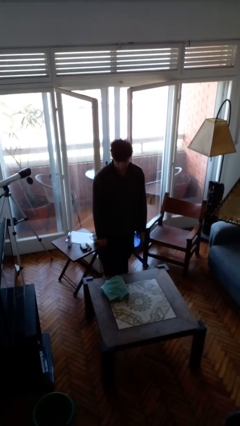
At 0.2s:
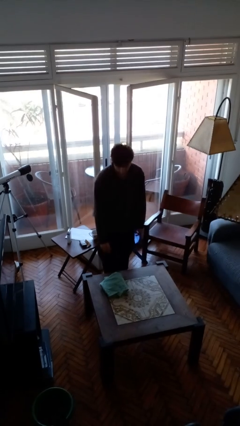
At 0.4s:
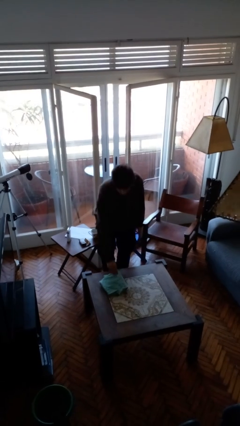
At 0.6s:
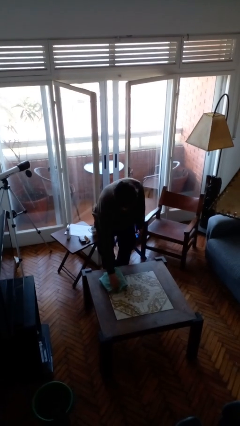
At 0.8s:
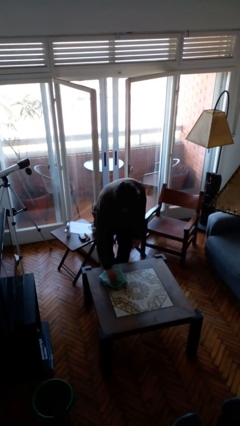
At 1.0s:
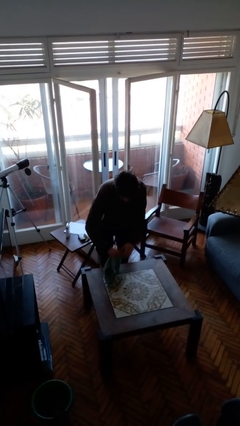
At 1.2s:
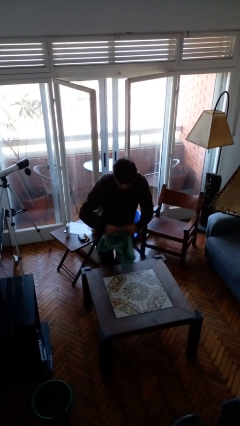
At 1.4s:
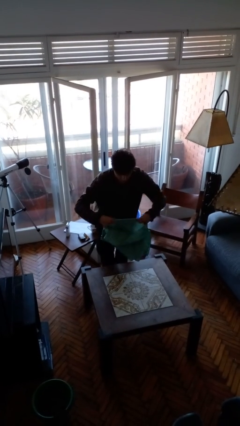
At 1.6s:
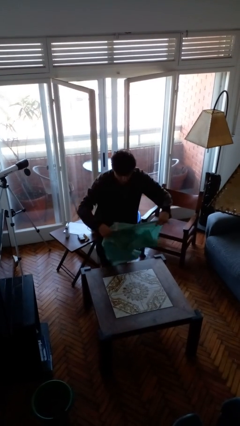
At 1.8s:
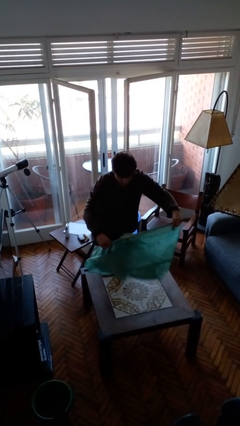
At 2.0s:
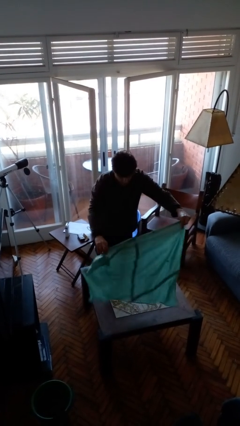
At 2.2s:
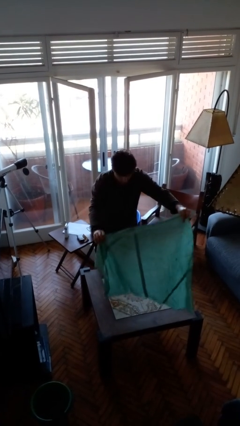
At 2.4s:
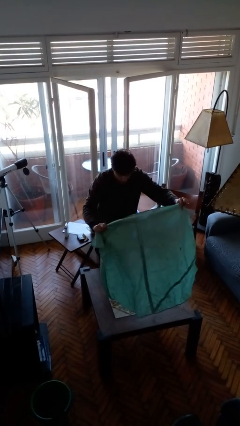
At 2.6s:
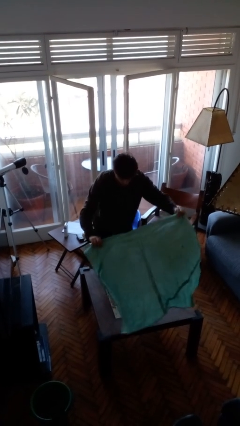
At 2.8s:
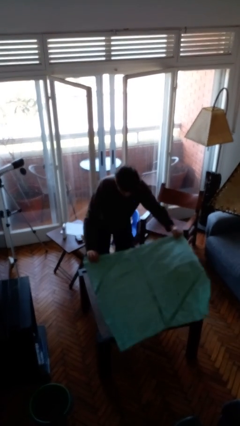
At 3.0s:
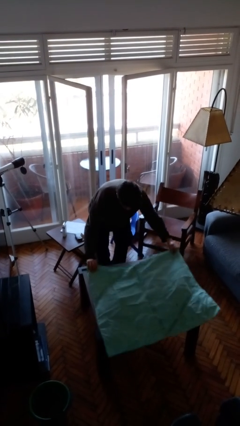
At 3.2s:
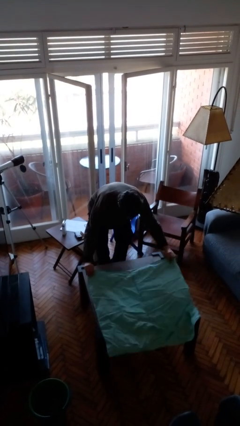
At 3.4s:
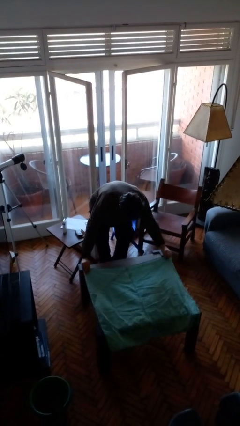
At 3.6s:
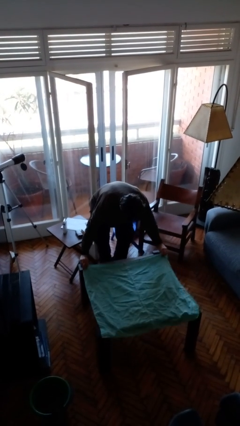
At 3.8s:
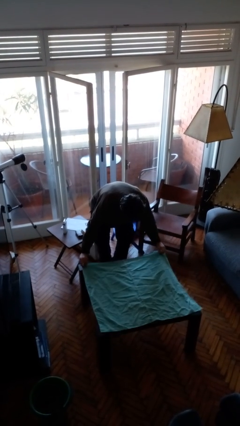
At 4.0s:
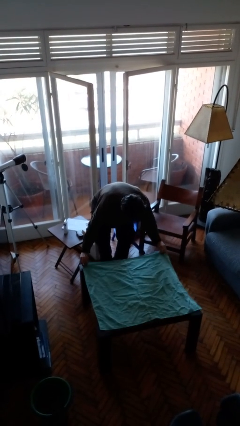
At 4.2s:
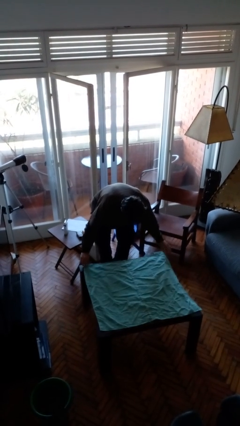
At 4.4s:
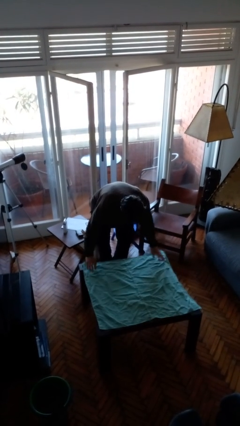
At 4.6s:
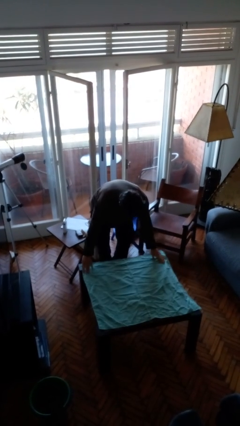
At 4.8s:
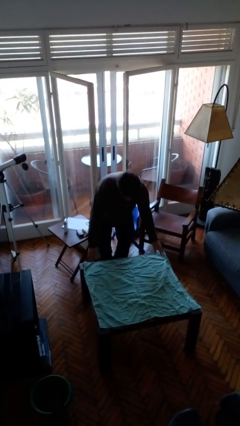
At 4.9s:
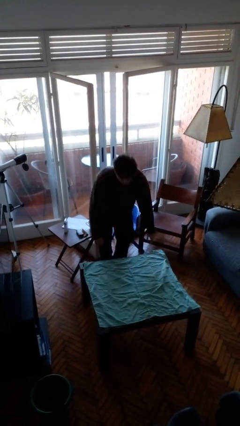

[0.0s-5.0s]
person spreads tablecloth

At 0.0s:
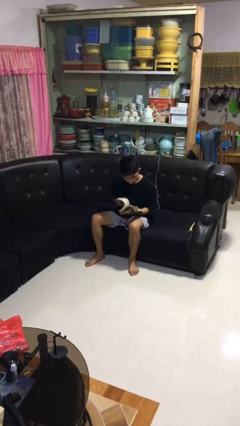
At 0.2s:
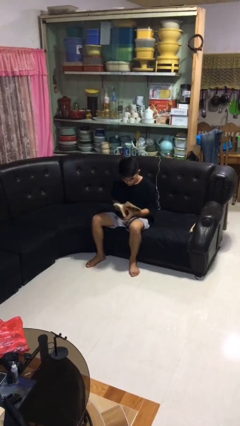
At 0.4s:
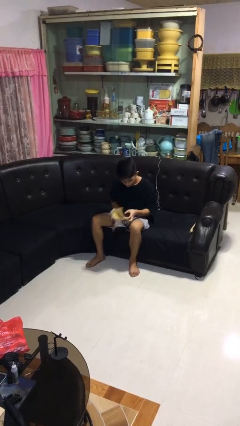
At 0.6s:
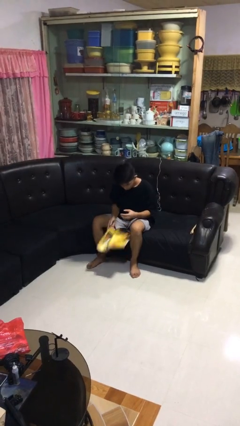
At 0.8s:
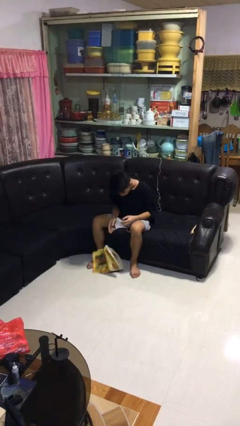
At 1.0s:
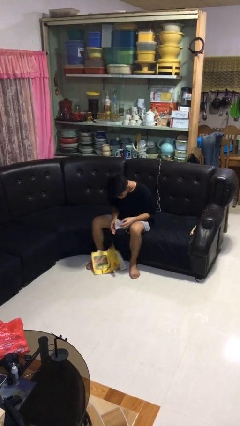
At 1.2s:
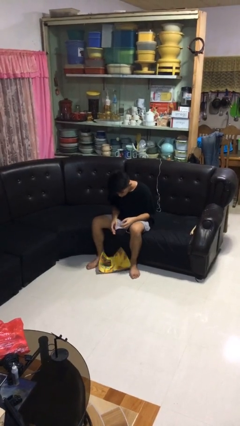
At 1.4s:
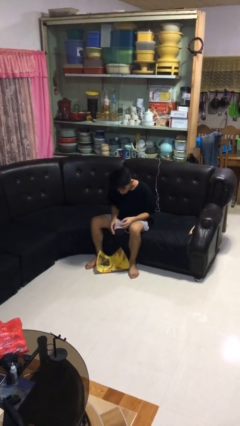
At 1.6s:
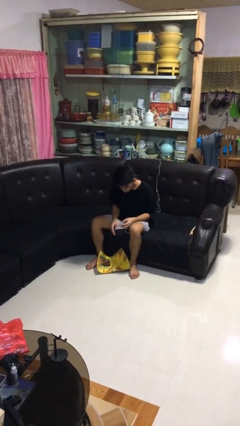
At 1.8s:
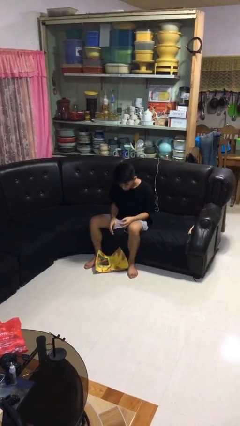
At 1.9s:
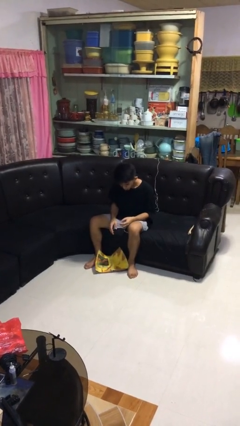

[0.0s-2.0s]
person drops object

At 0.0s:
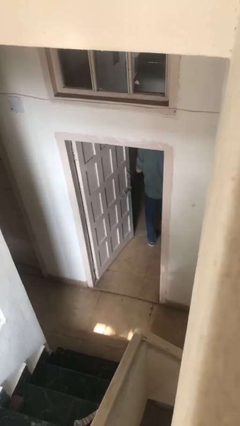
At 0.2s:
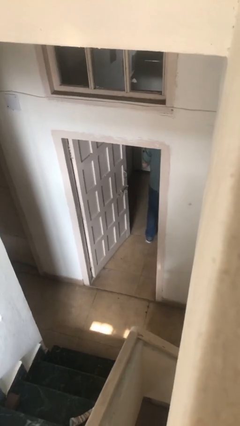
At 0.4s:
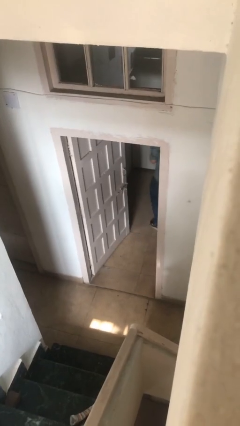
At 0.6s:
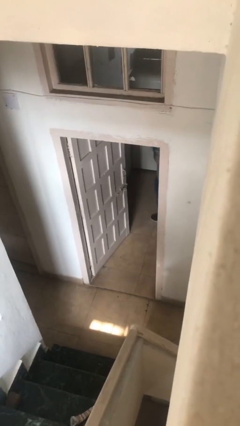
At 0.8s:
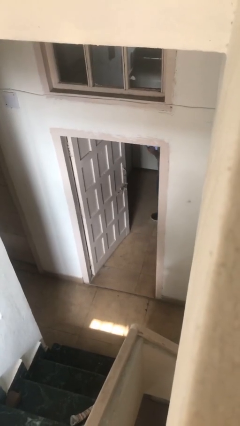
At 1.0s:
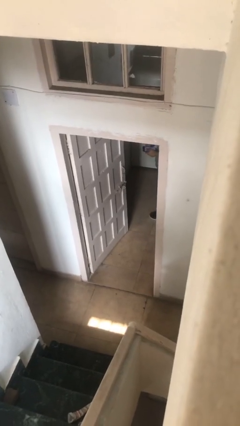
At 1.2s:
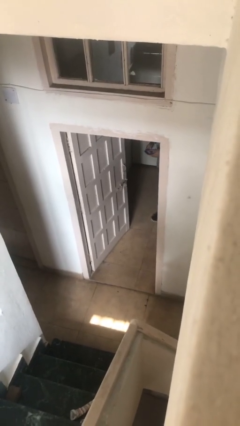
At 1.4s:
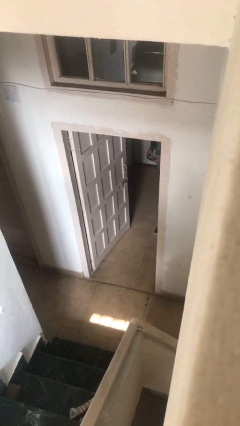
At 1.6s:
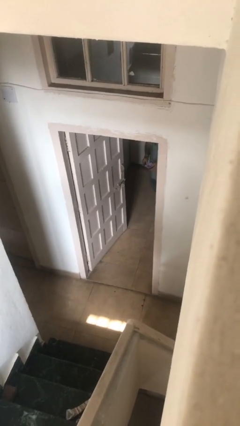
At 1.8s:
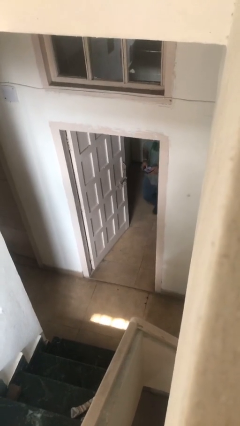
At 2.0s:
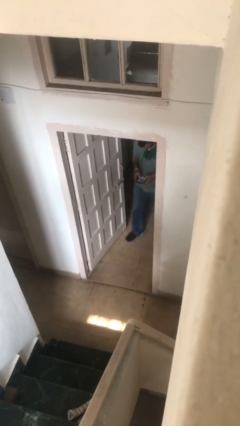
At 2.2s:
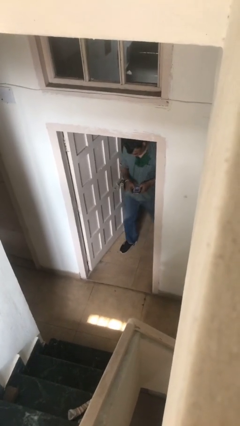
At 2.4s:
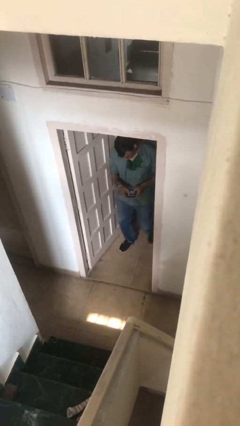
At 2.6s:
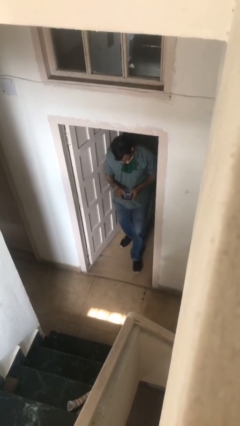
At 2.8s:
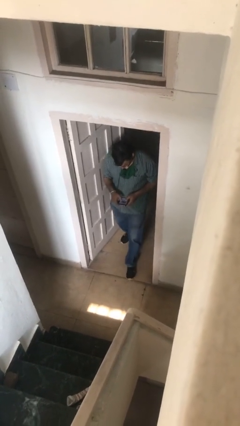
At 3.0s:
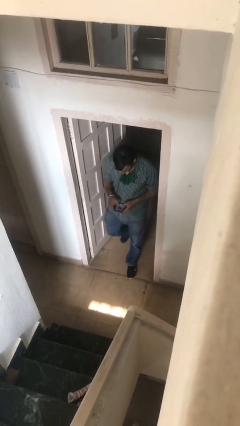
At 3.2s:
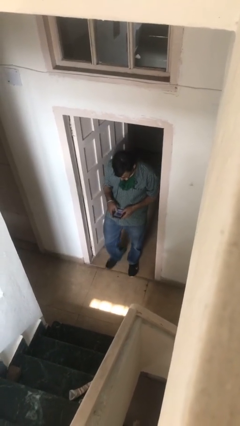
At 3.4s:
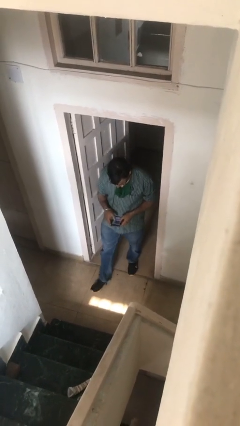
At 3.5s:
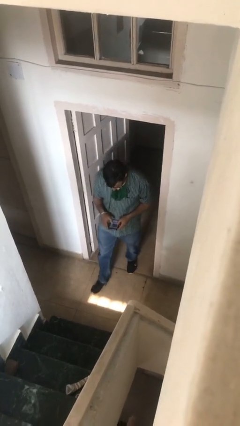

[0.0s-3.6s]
person enters scene through structure

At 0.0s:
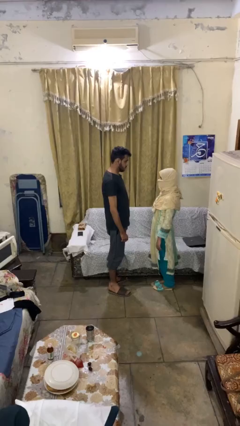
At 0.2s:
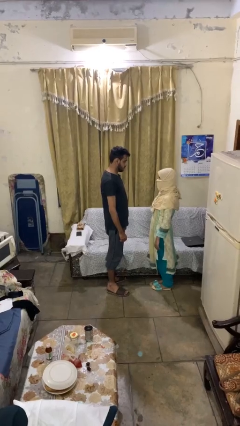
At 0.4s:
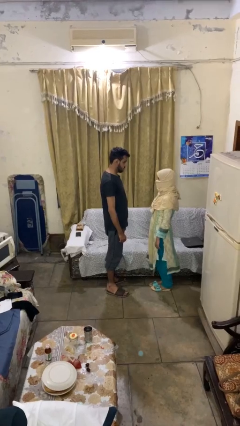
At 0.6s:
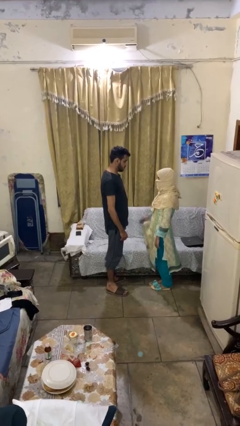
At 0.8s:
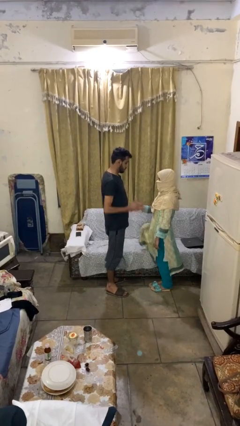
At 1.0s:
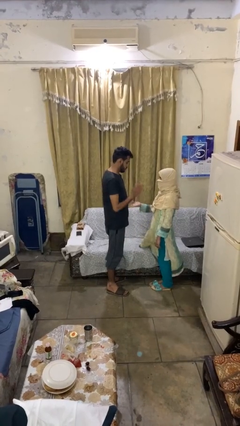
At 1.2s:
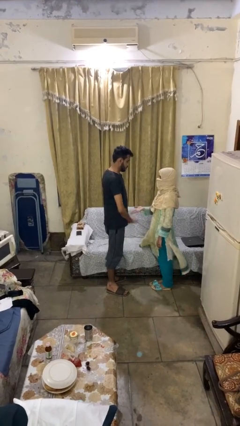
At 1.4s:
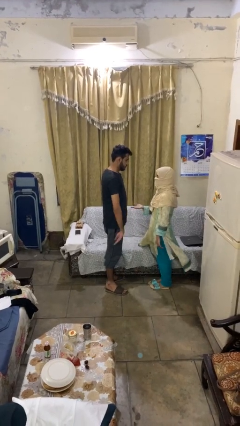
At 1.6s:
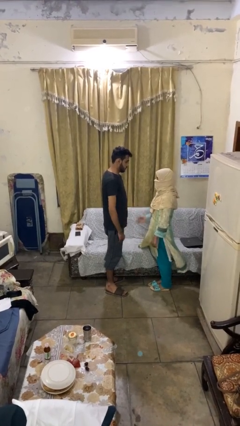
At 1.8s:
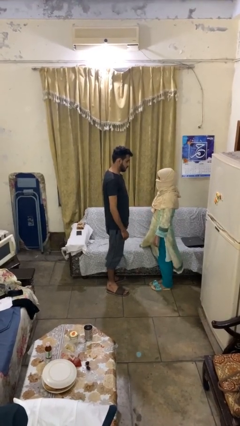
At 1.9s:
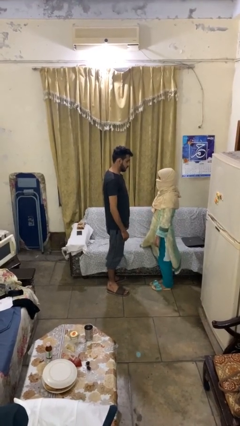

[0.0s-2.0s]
person highfives hand

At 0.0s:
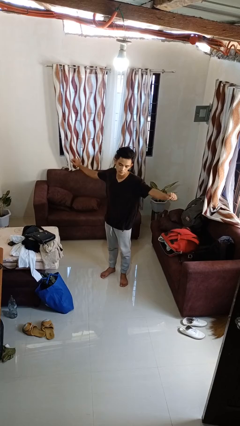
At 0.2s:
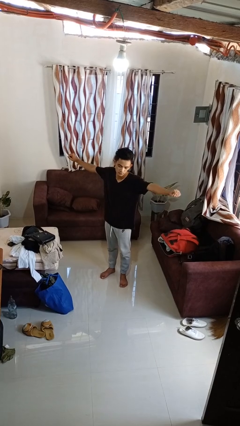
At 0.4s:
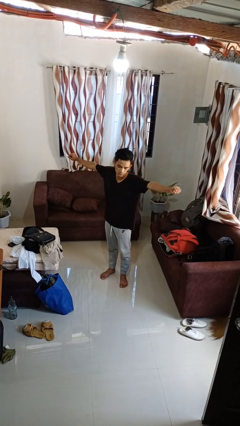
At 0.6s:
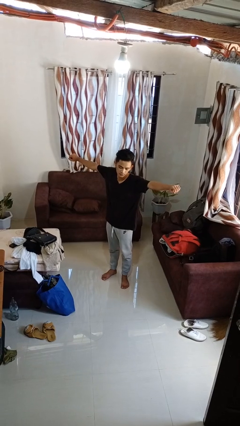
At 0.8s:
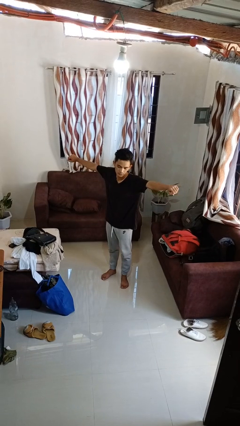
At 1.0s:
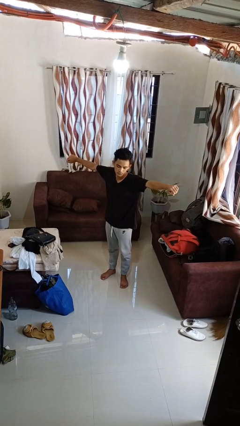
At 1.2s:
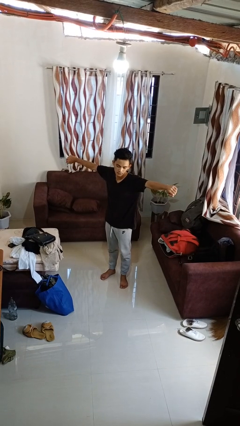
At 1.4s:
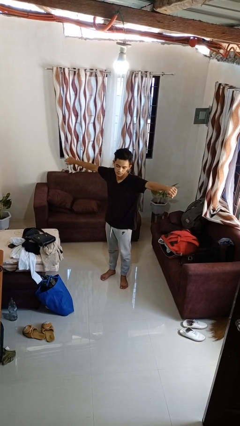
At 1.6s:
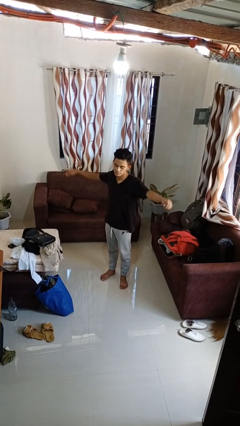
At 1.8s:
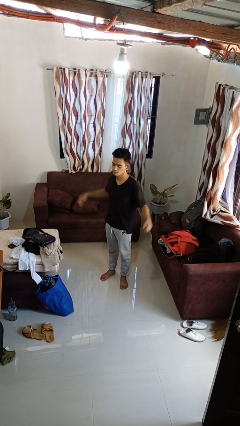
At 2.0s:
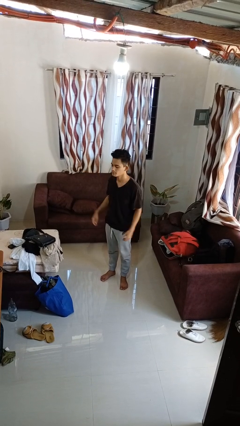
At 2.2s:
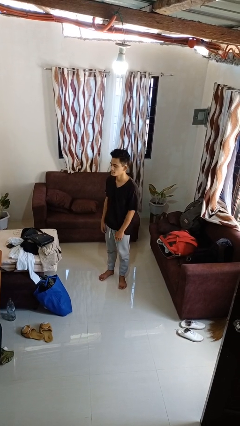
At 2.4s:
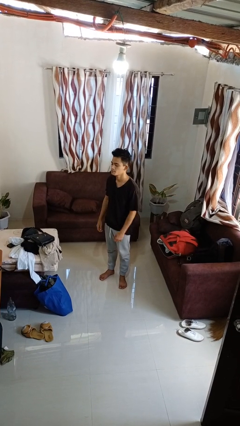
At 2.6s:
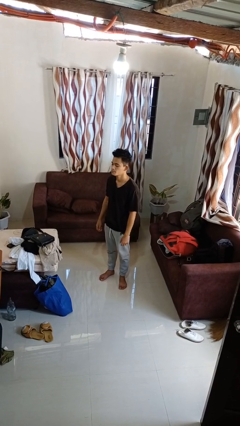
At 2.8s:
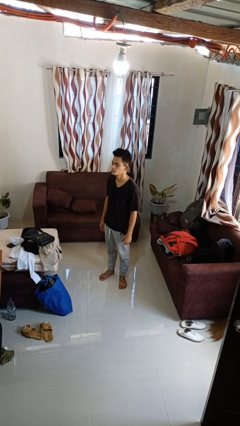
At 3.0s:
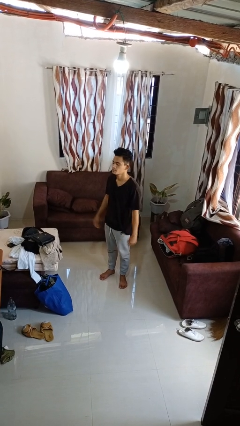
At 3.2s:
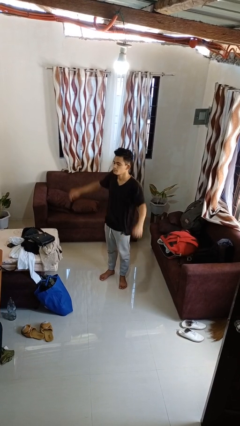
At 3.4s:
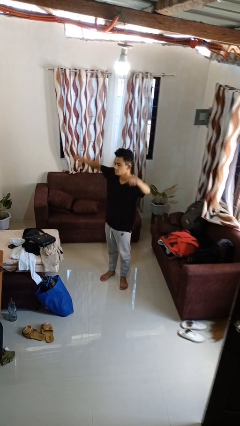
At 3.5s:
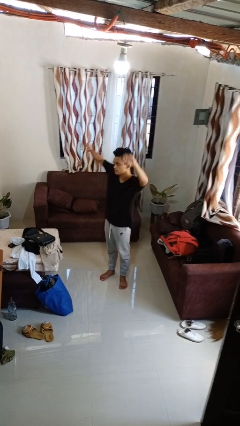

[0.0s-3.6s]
person stretches arms to side

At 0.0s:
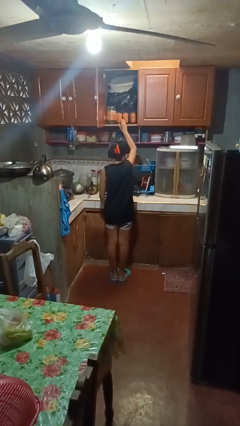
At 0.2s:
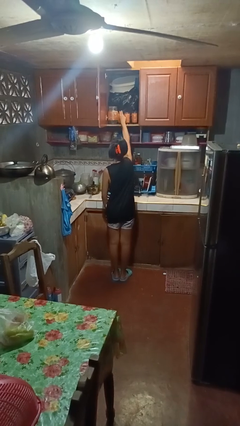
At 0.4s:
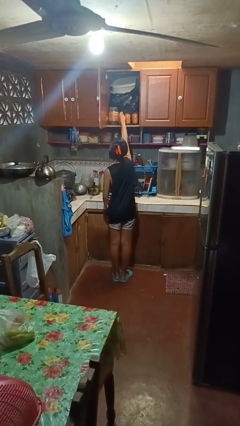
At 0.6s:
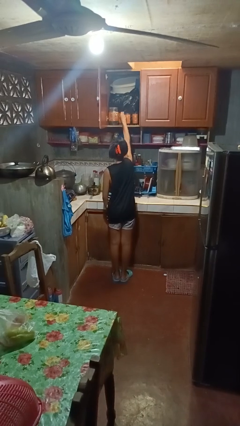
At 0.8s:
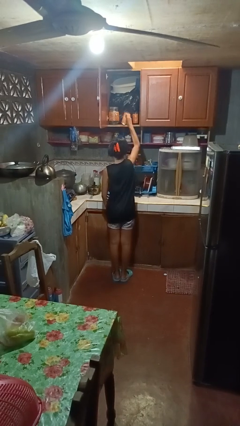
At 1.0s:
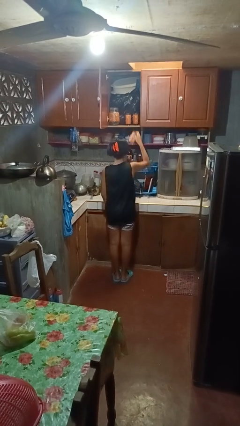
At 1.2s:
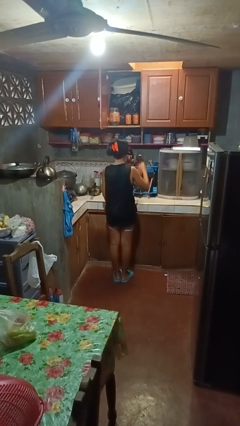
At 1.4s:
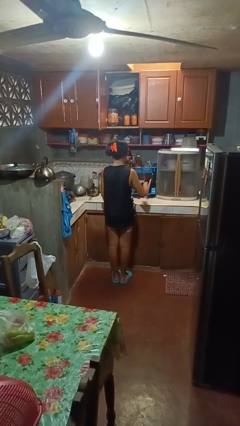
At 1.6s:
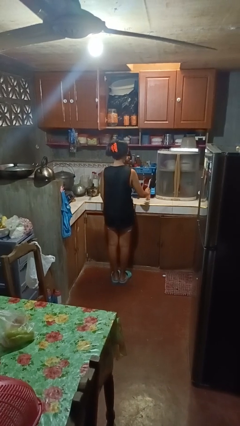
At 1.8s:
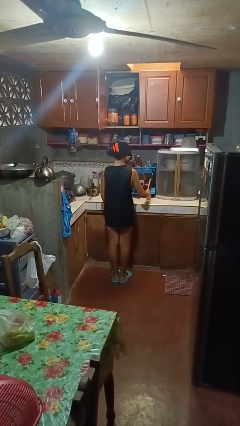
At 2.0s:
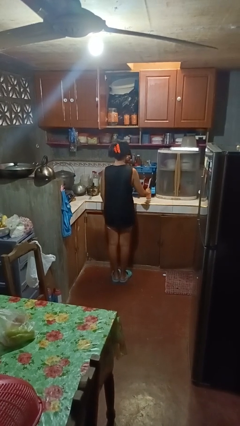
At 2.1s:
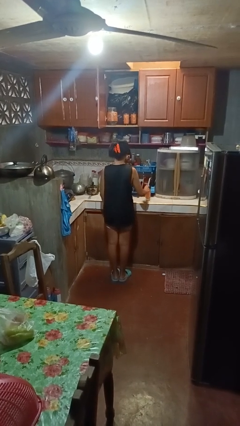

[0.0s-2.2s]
person takes object from cabinet
